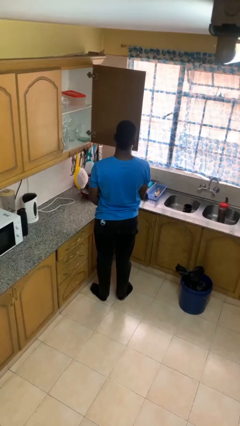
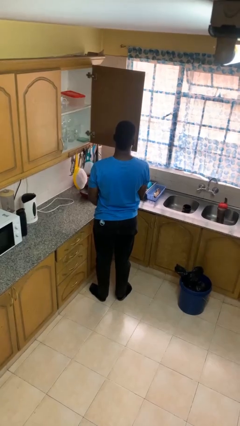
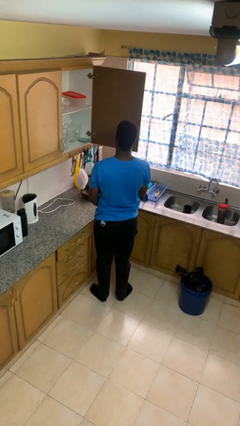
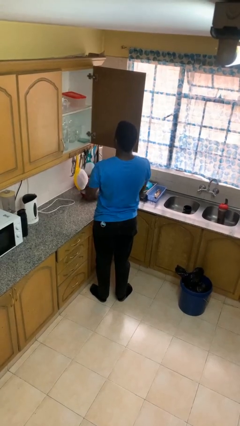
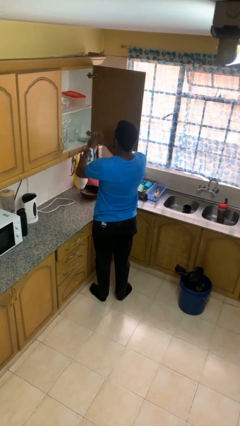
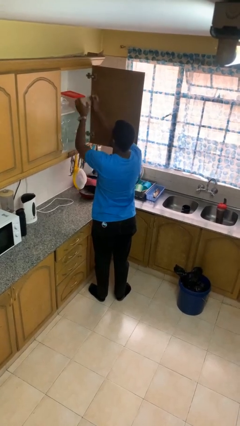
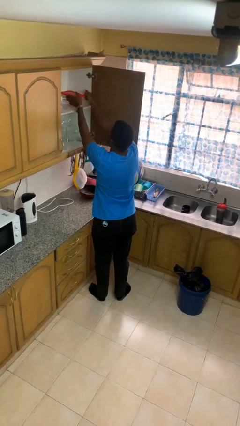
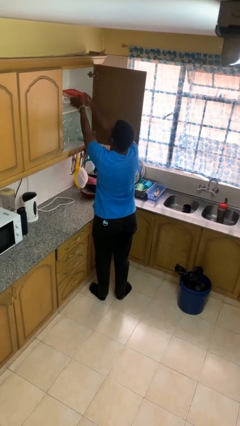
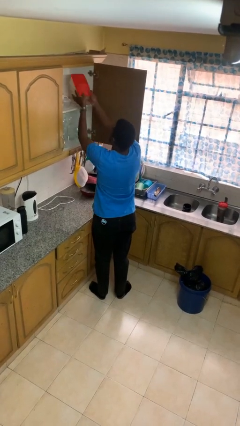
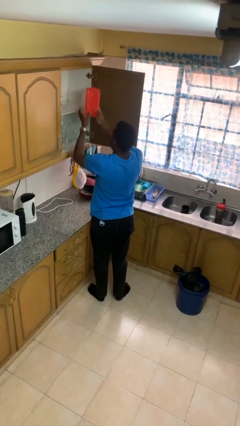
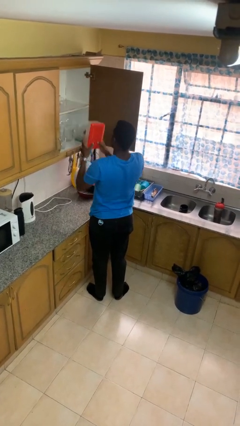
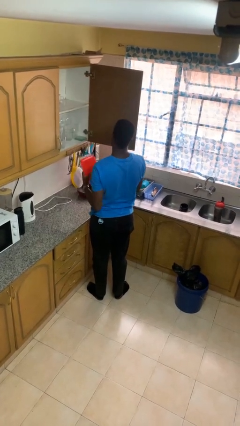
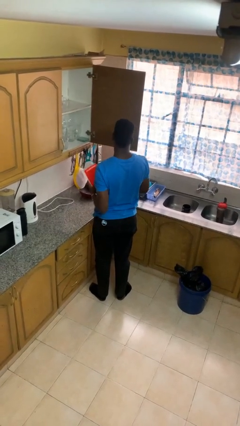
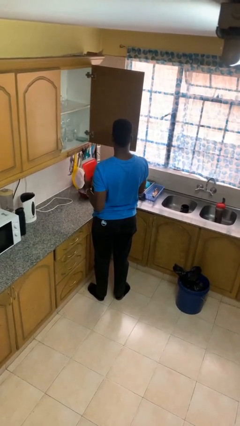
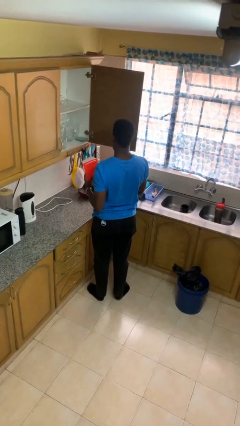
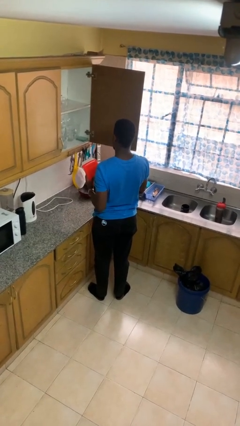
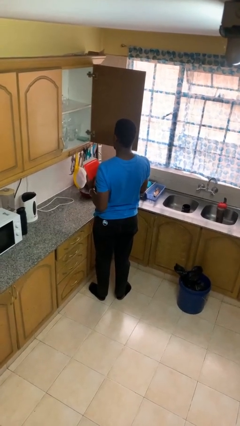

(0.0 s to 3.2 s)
person picks up object from cabinet

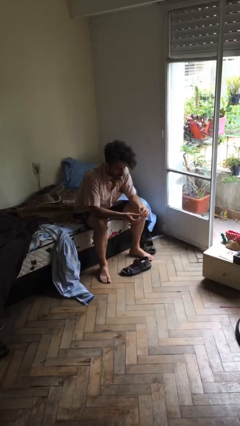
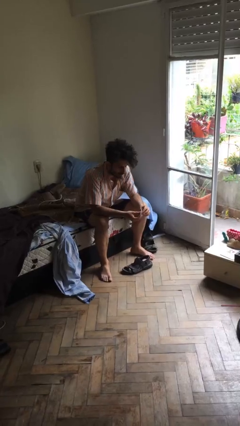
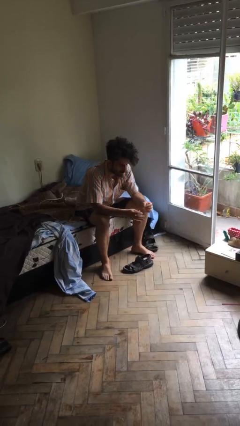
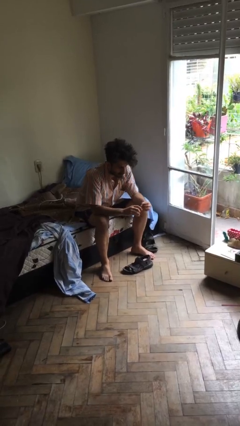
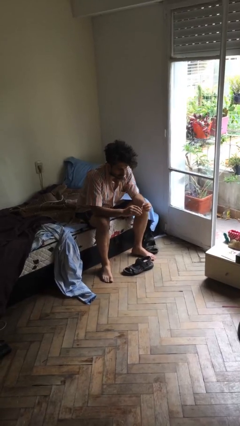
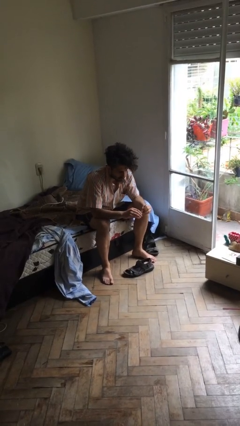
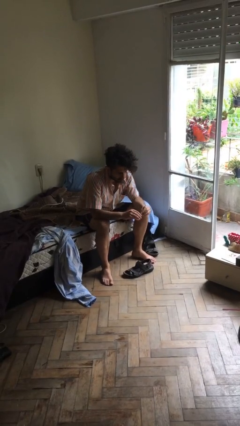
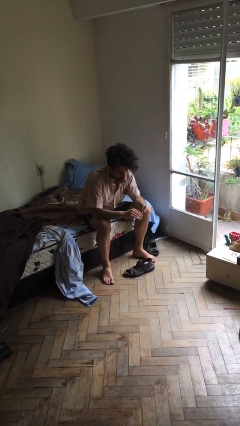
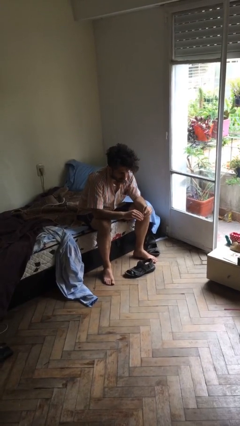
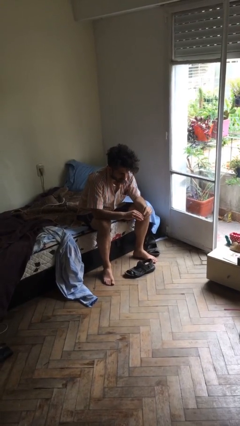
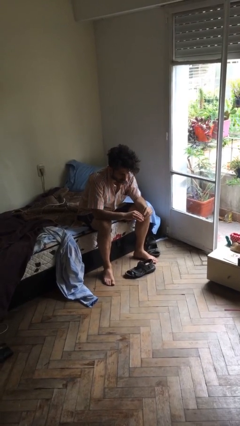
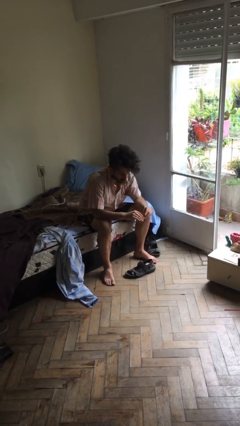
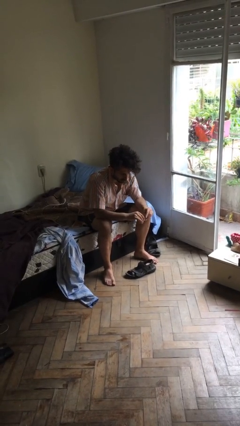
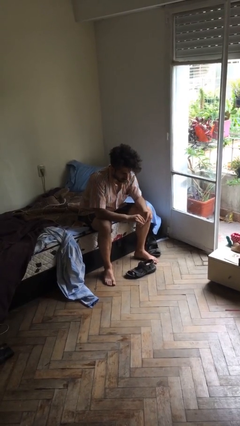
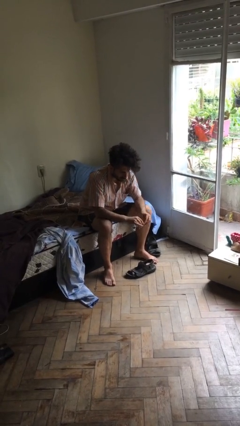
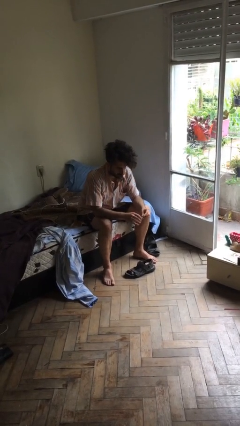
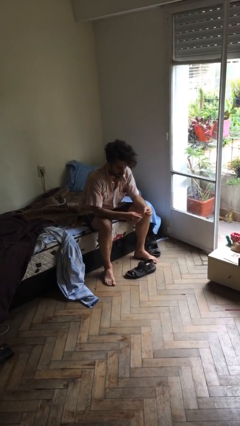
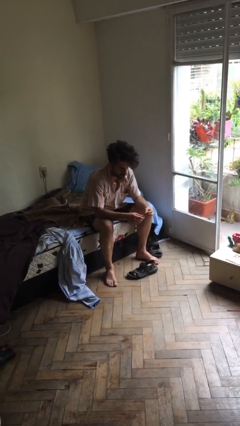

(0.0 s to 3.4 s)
person clips fingernails

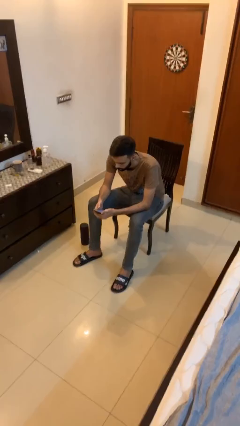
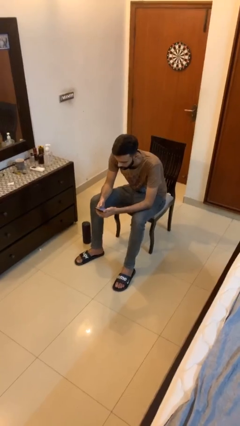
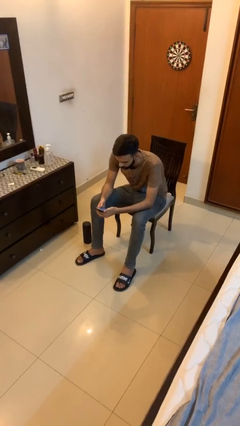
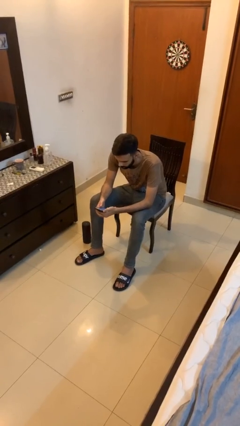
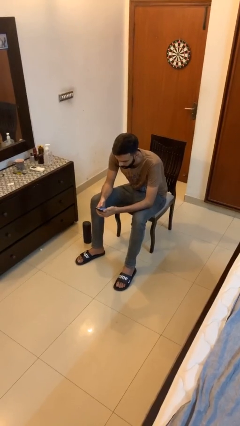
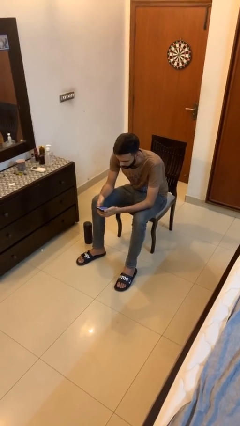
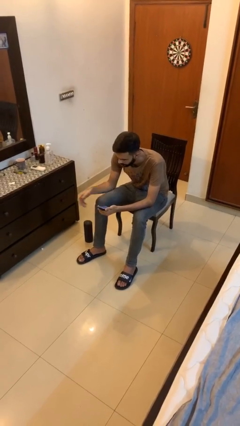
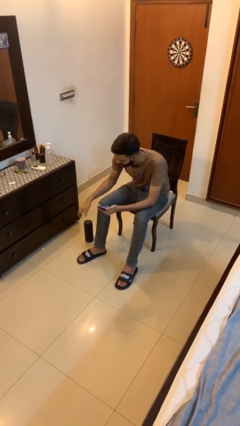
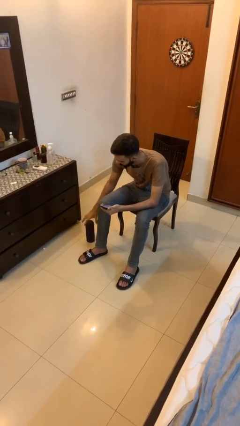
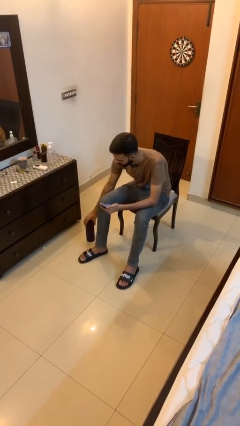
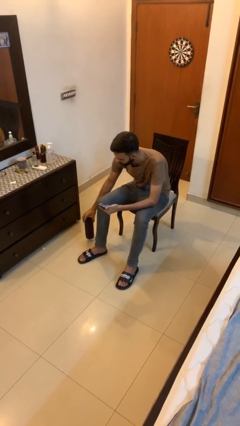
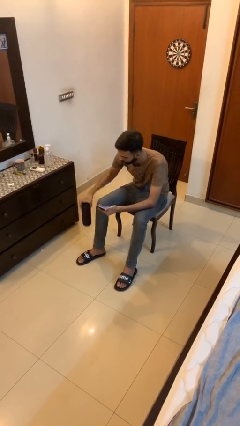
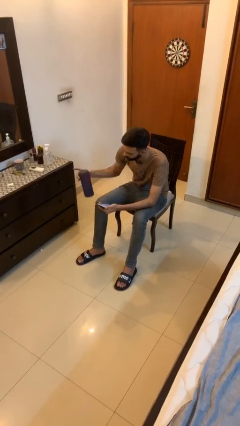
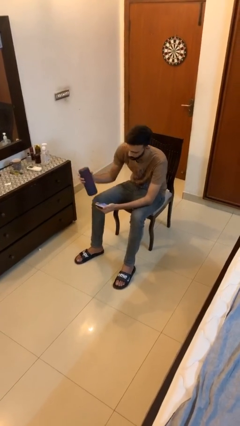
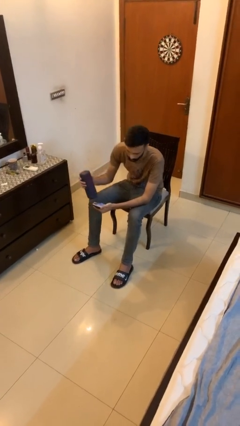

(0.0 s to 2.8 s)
person picks up object from floor

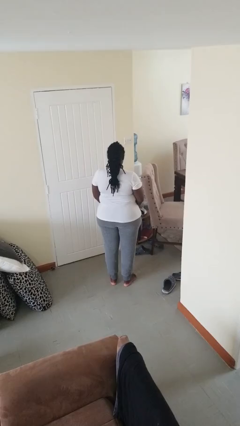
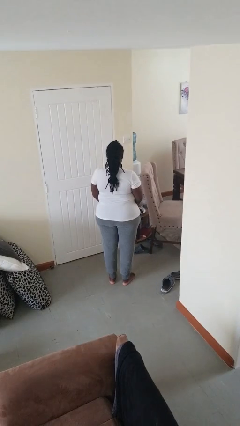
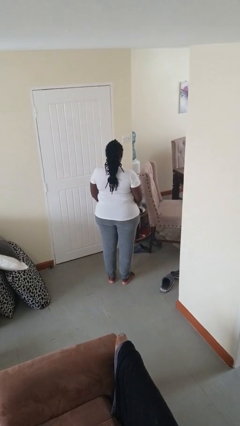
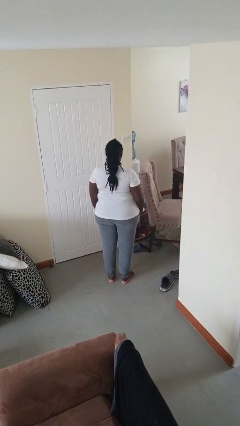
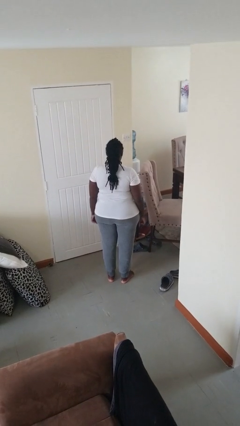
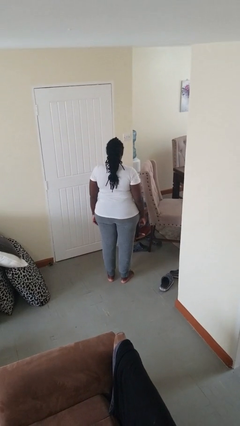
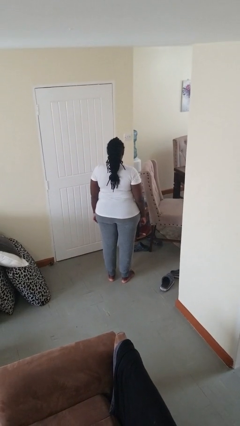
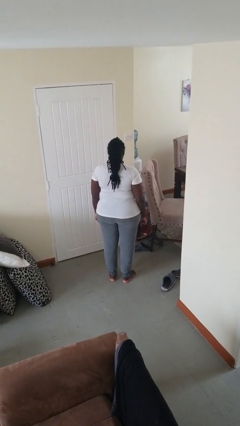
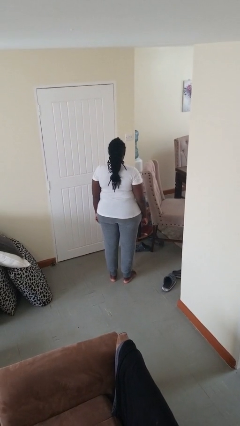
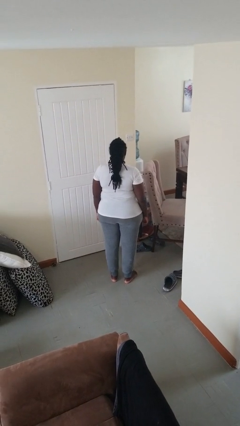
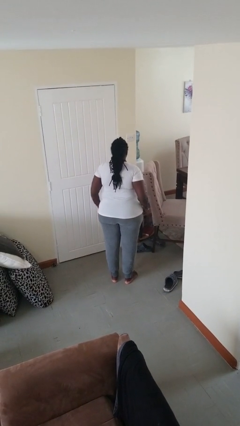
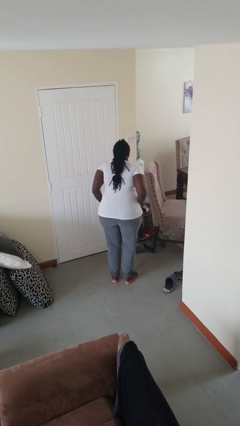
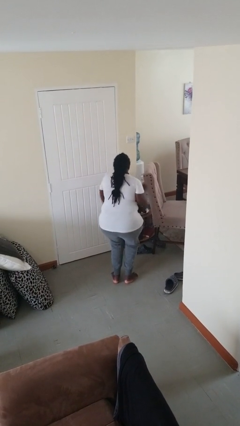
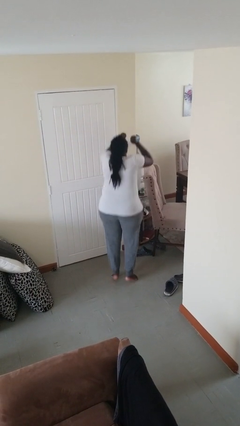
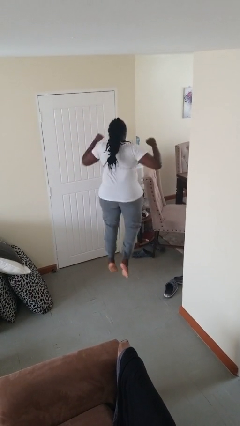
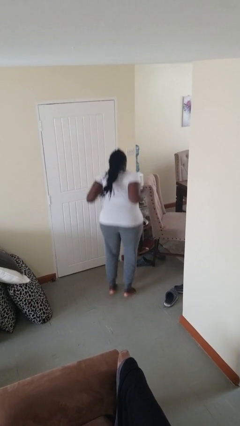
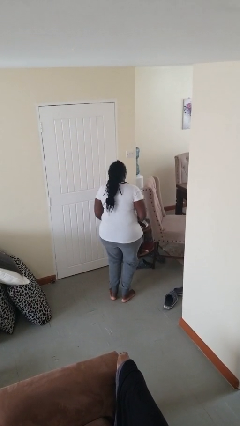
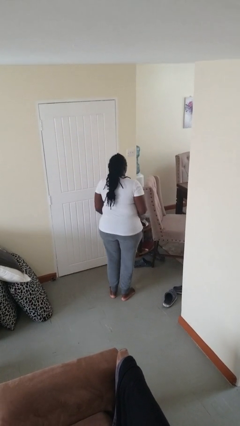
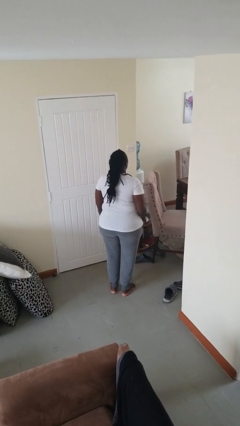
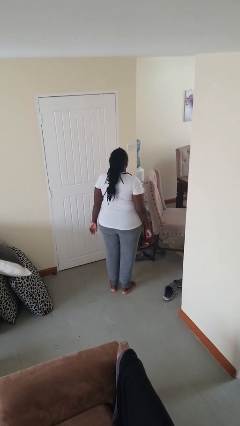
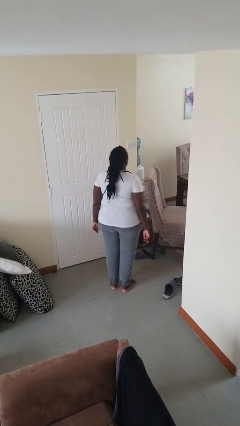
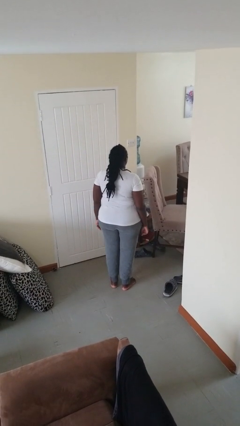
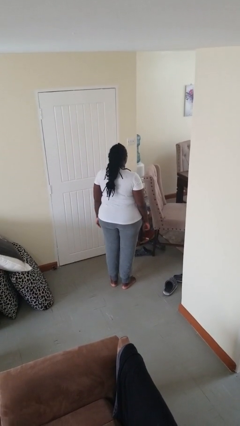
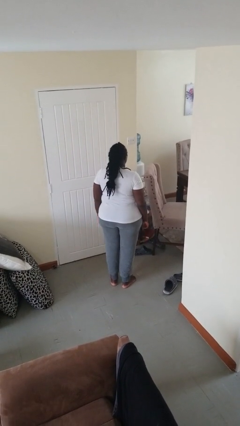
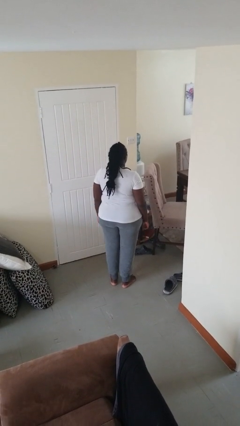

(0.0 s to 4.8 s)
person jumps

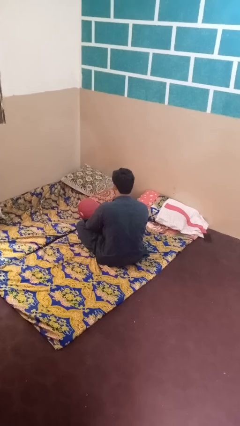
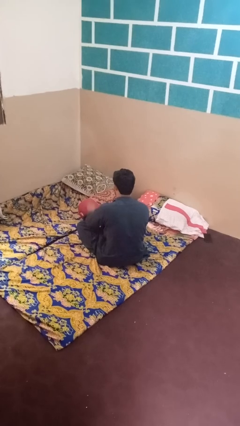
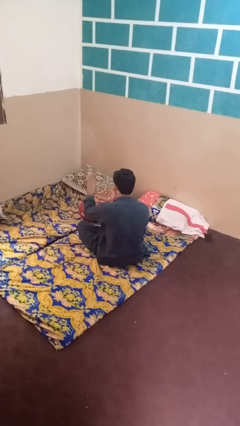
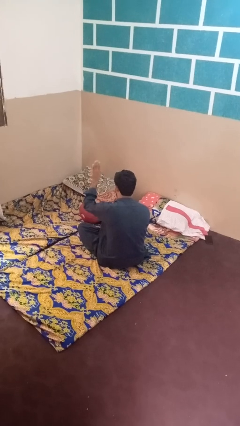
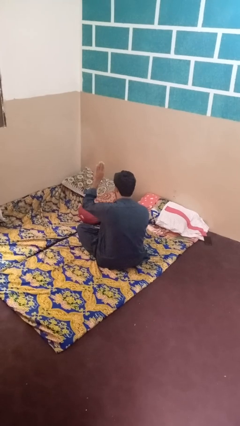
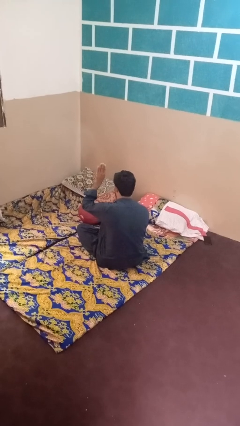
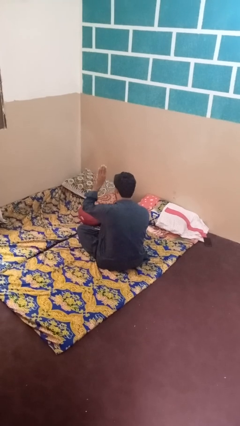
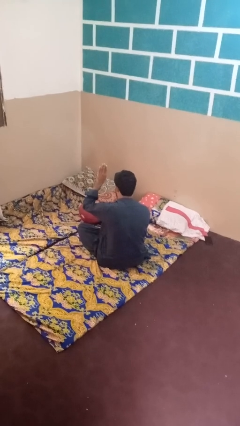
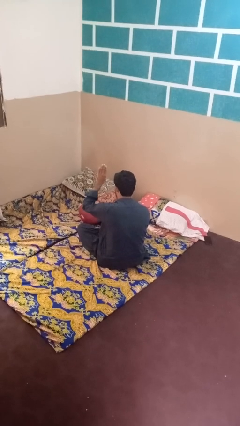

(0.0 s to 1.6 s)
person gestures number four

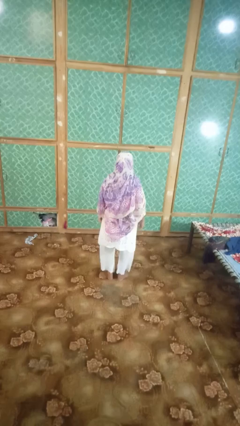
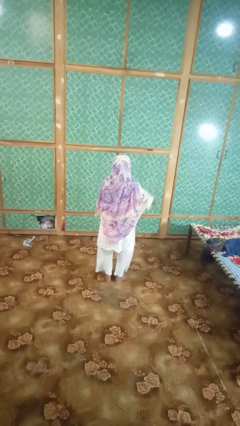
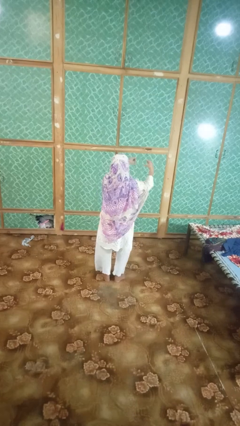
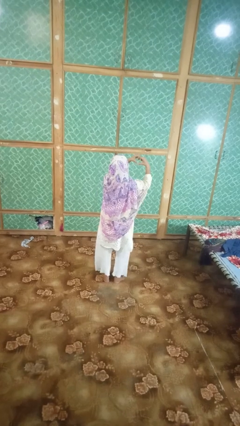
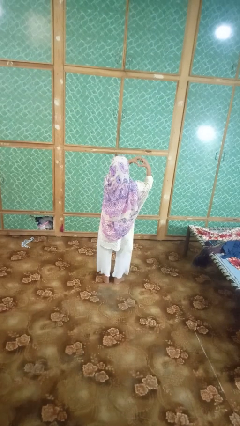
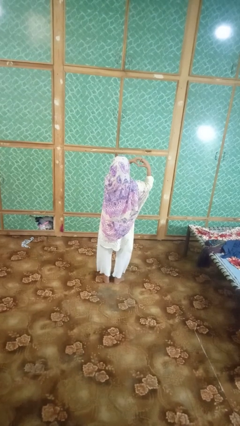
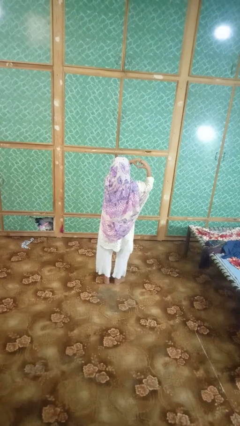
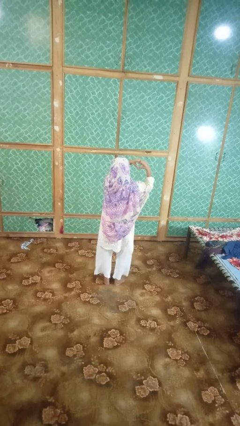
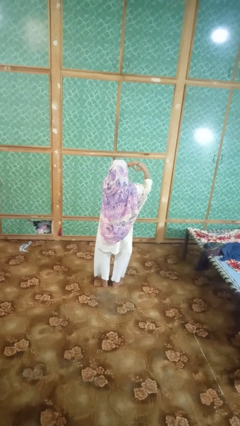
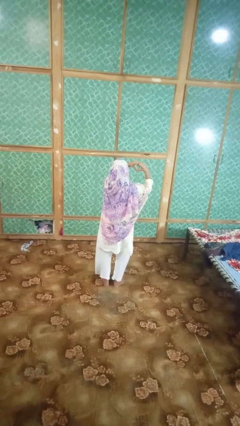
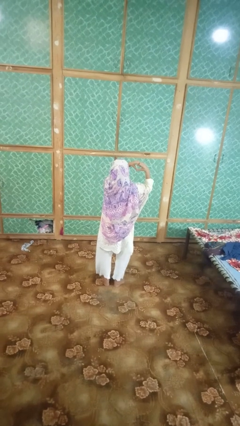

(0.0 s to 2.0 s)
person gestures heart
